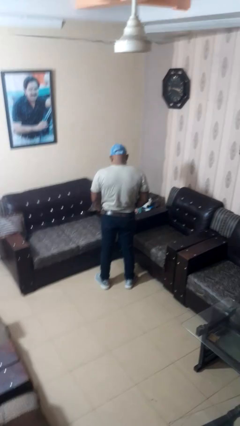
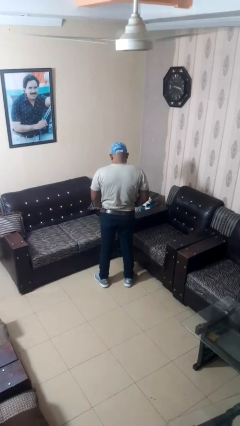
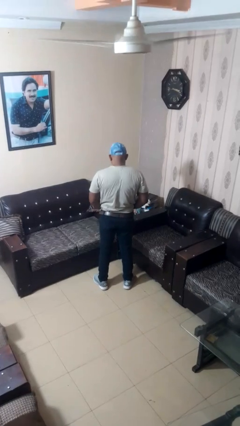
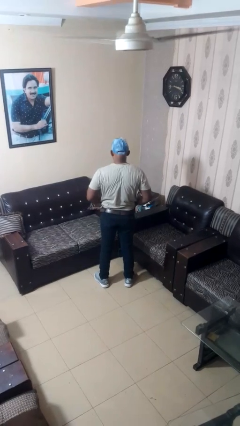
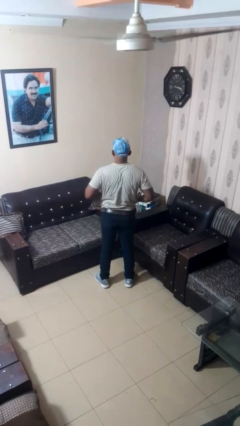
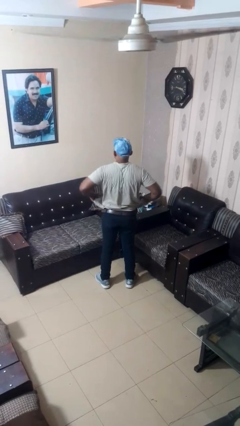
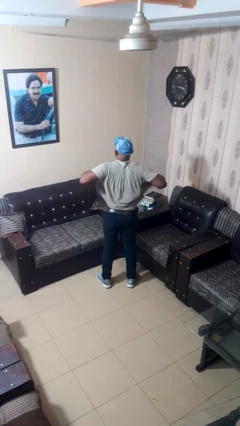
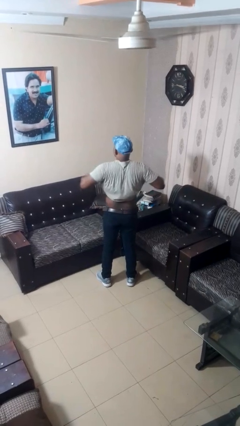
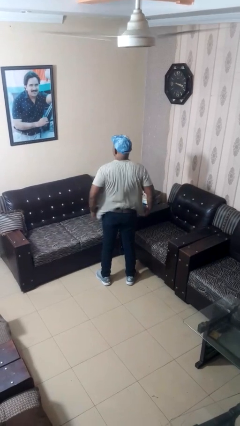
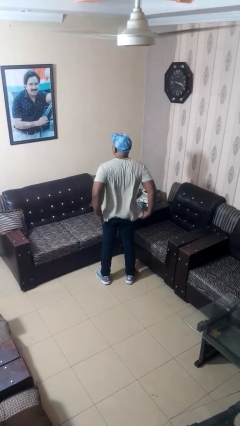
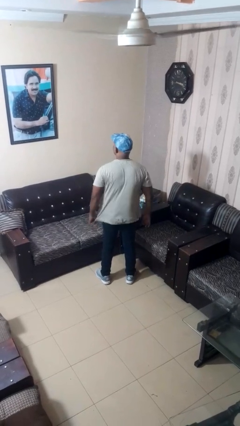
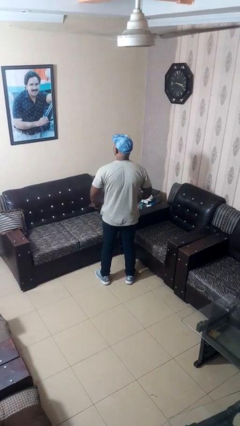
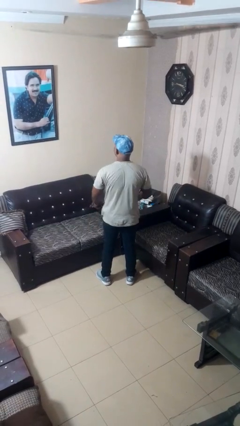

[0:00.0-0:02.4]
person untucks shirt

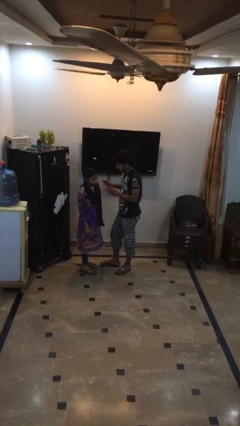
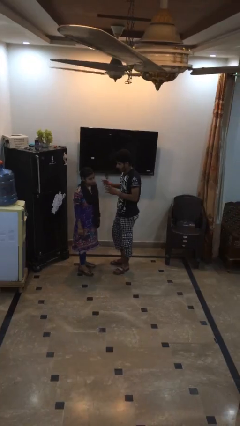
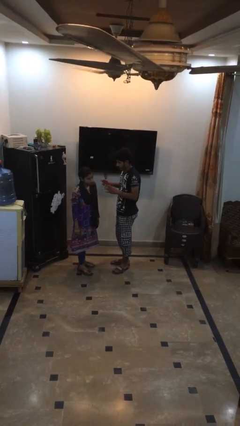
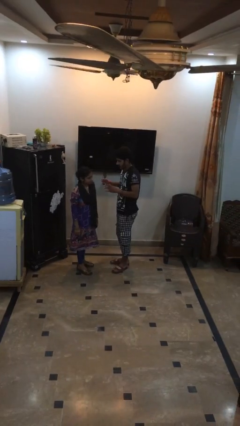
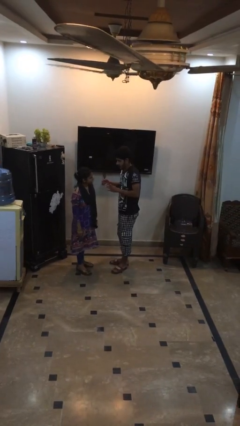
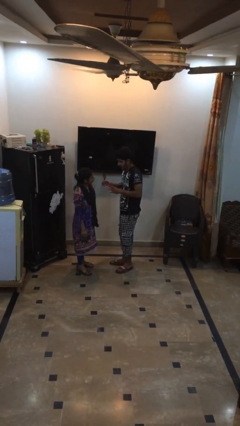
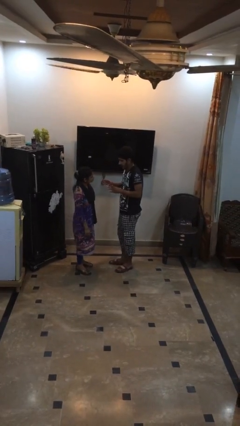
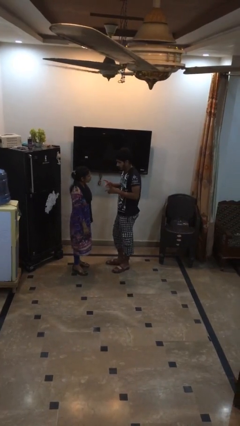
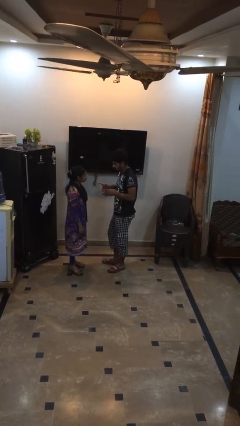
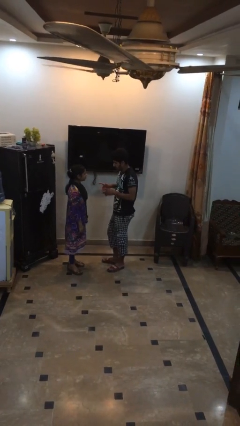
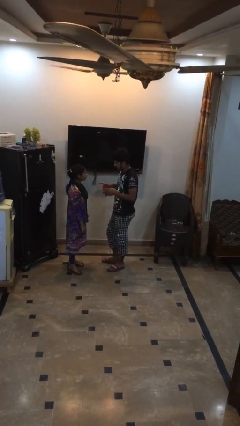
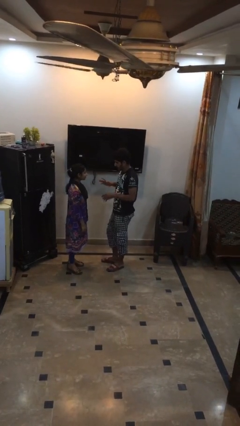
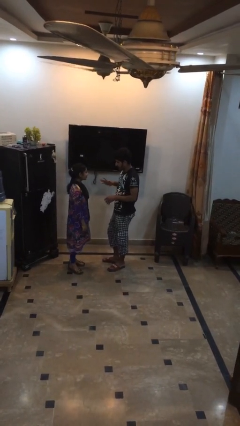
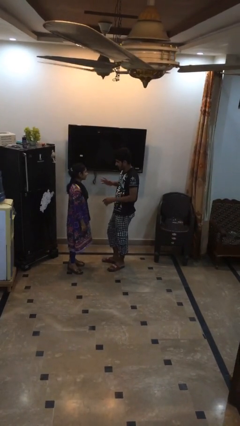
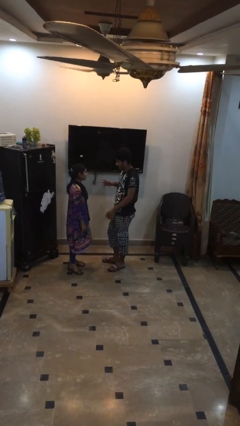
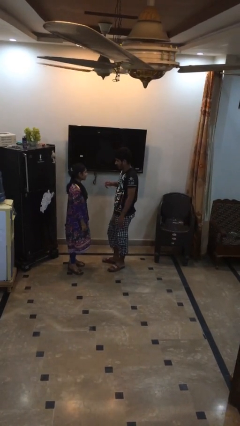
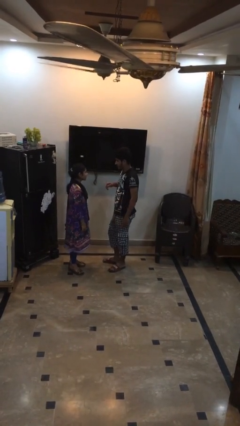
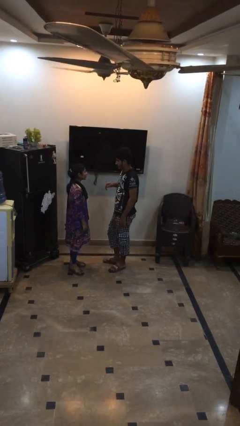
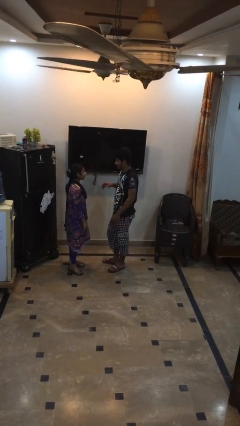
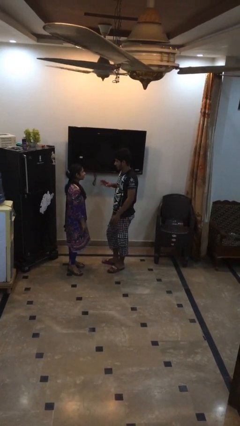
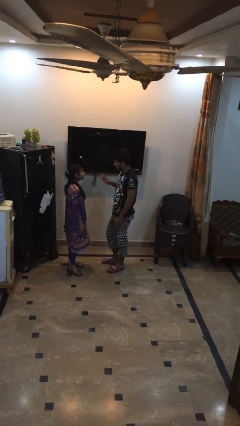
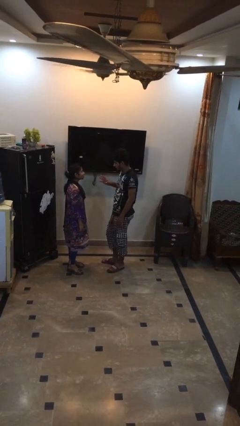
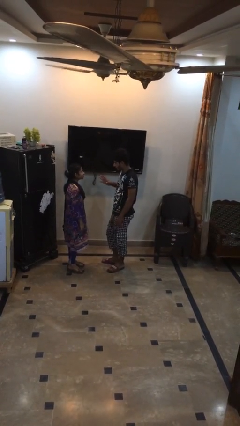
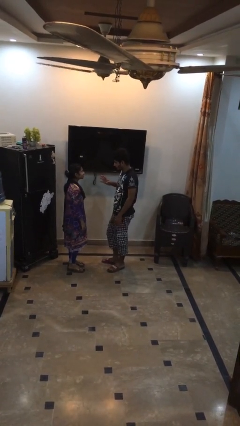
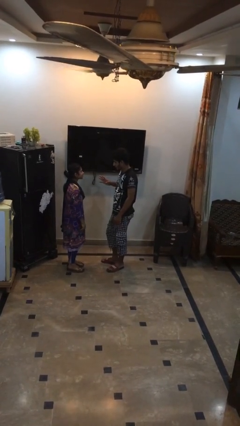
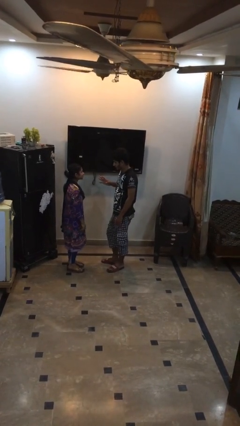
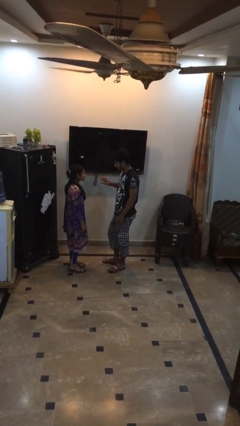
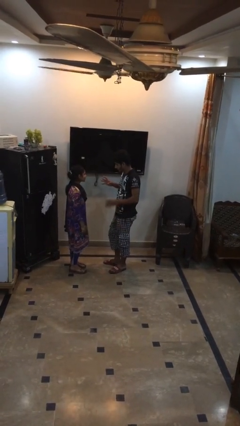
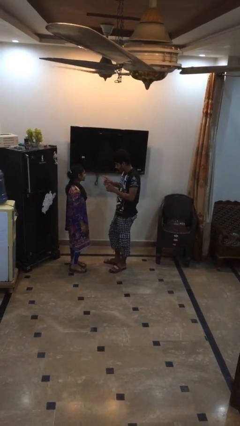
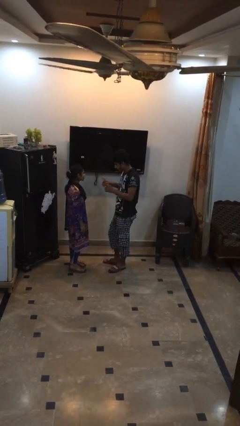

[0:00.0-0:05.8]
person talks to person

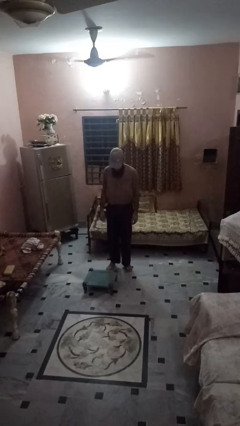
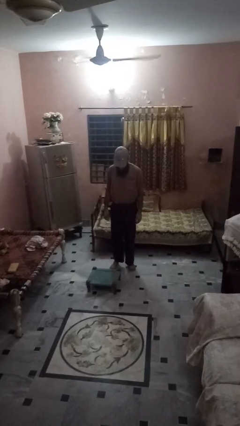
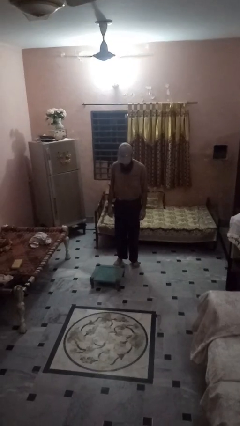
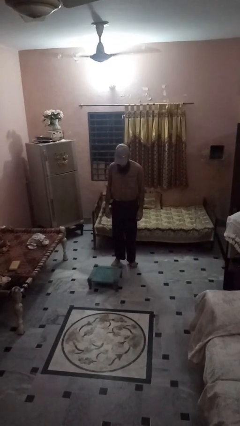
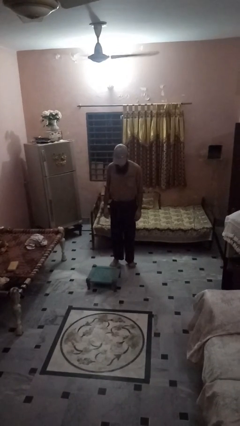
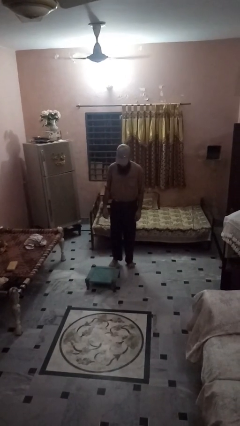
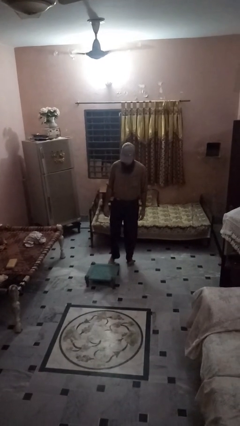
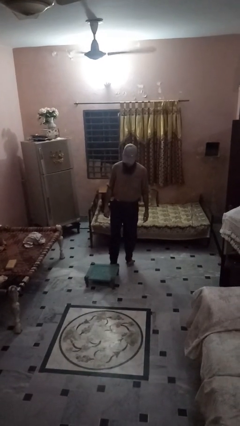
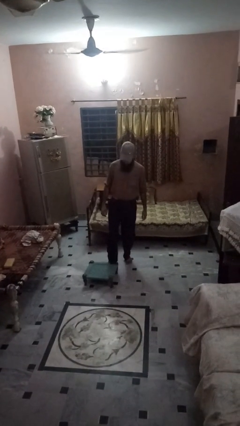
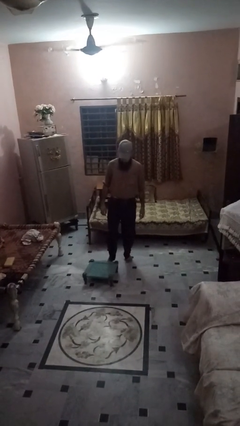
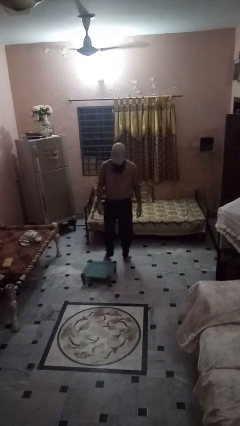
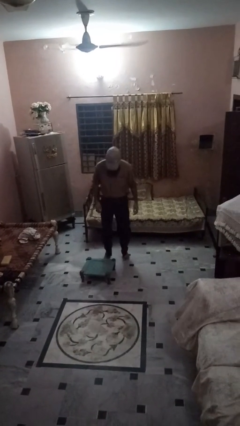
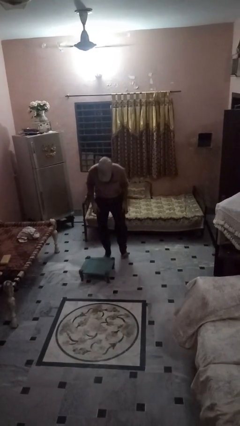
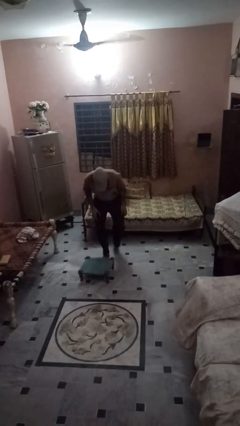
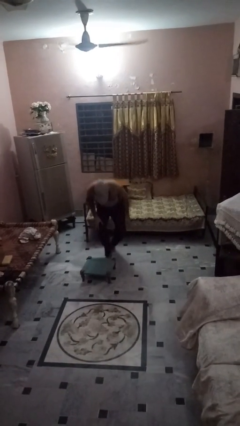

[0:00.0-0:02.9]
person trips on object on floor

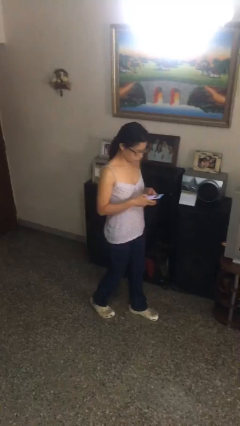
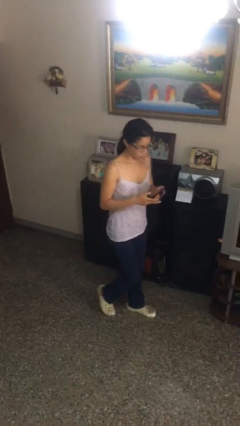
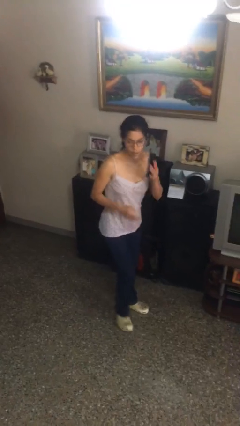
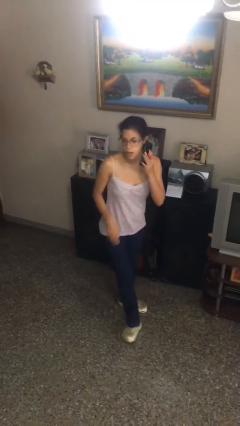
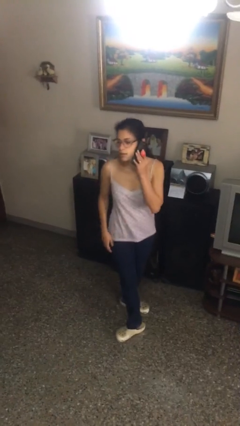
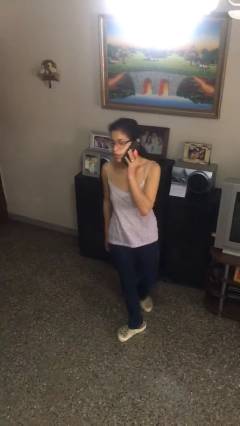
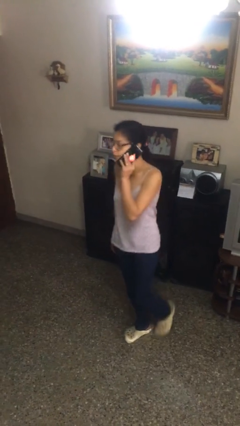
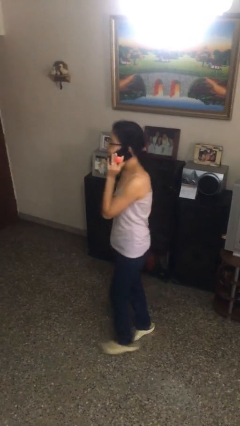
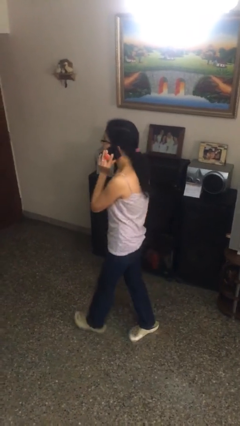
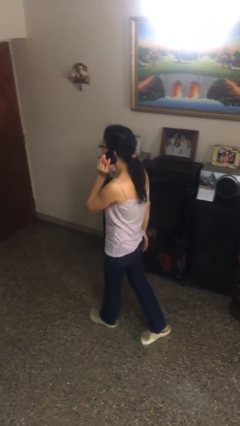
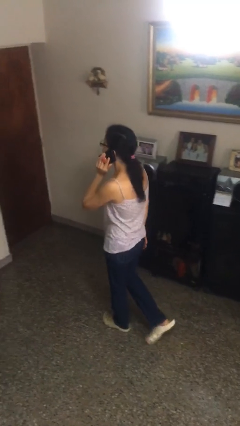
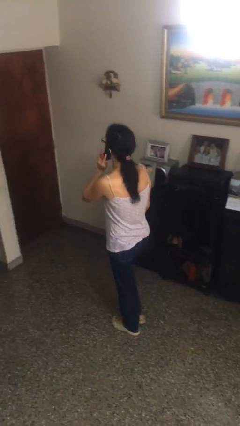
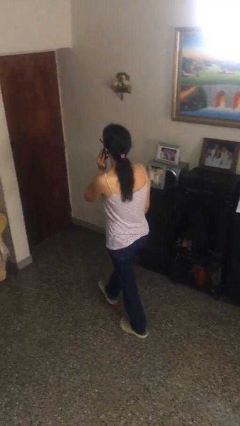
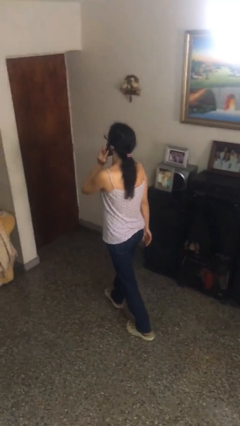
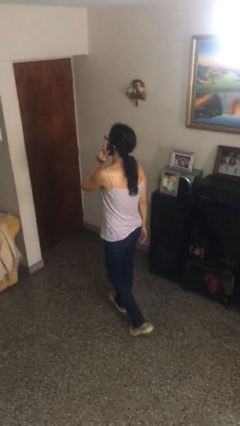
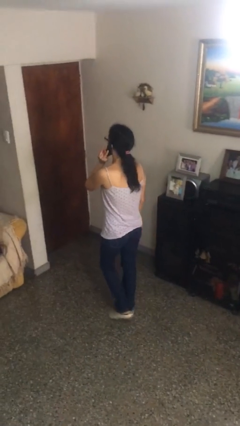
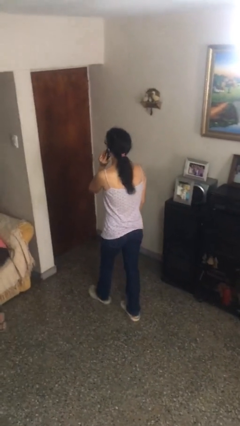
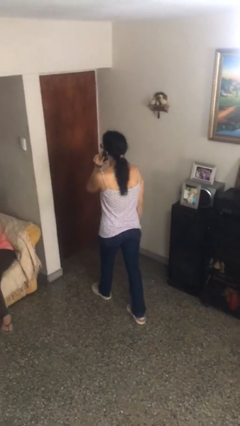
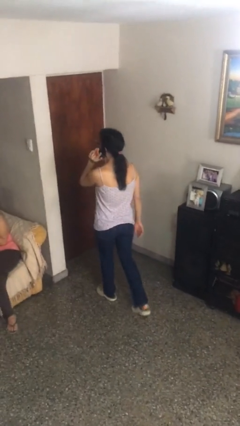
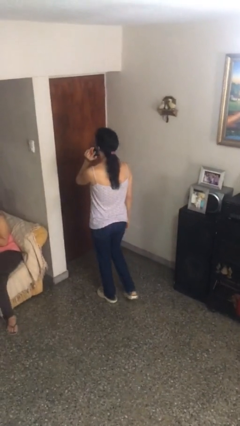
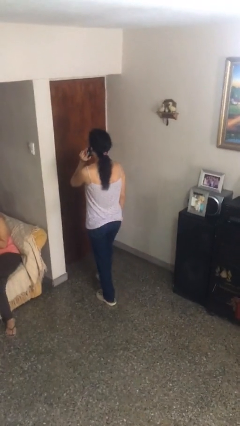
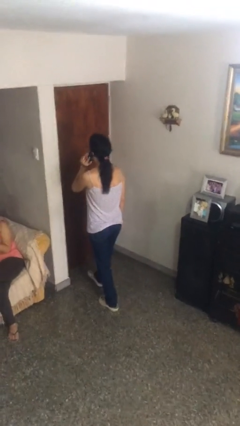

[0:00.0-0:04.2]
person talks on phone

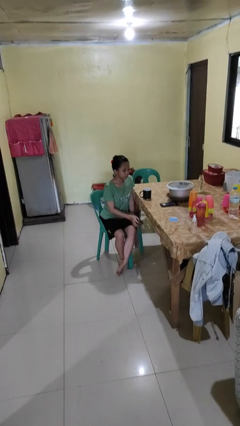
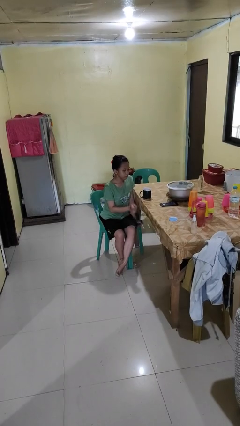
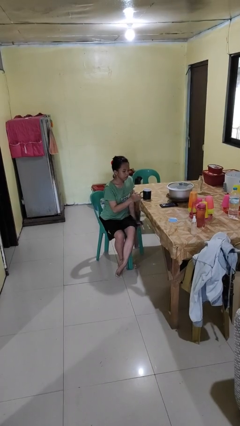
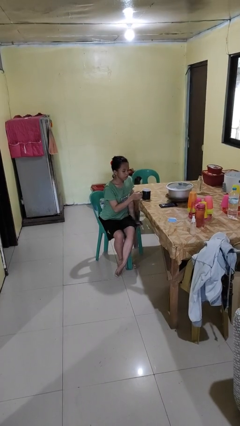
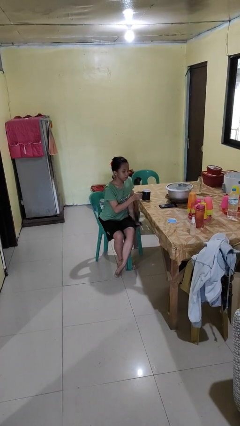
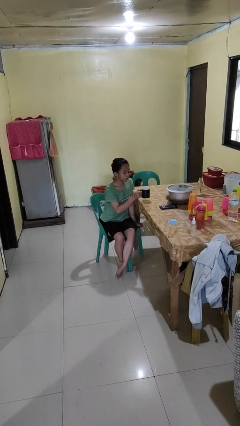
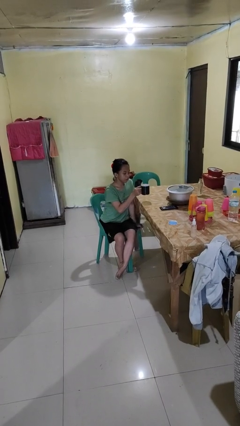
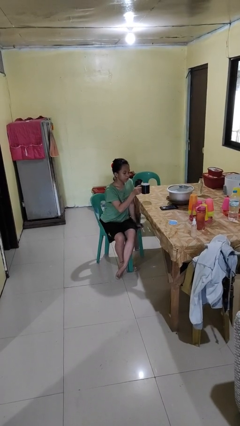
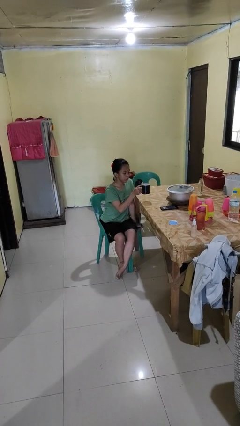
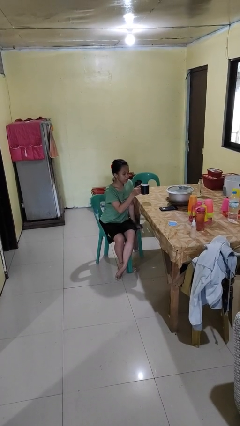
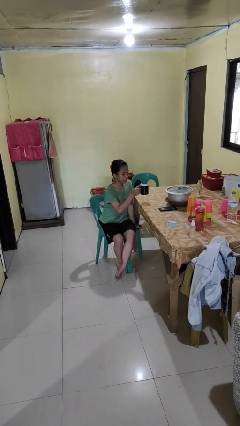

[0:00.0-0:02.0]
person picks up object from table

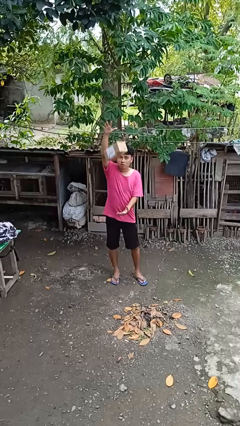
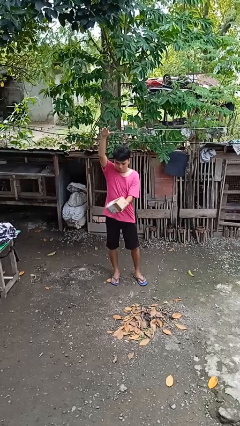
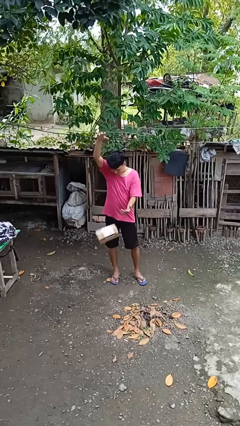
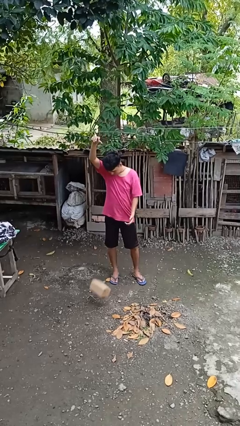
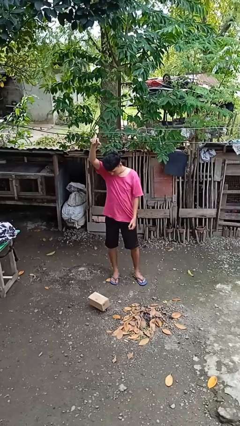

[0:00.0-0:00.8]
person drops object
